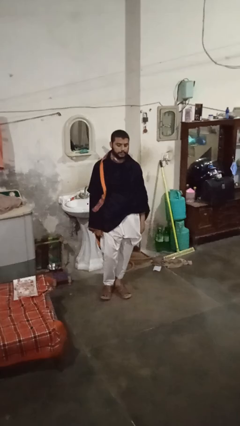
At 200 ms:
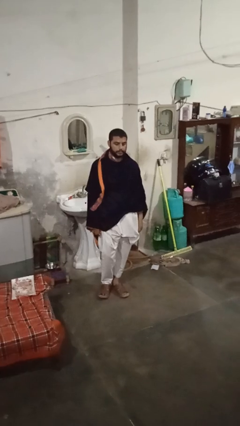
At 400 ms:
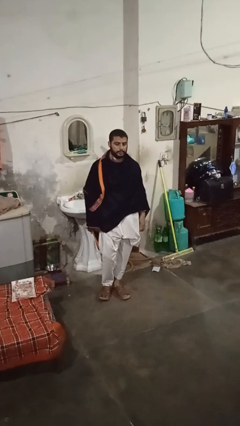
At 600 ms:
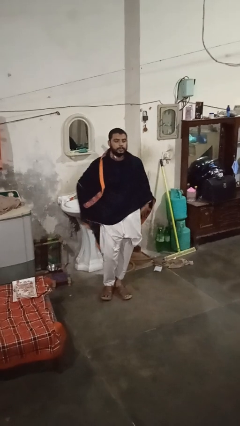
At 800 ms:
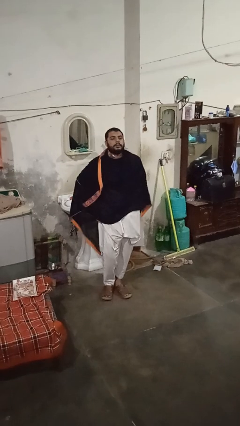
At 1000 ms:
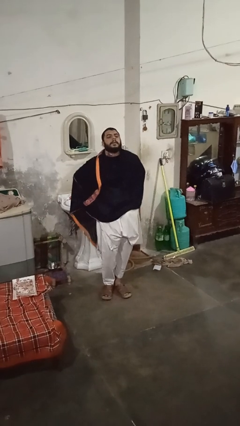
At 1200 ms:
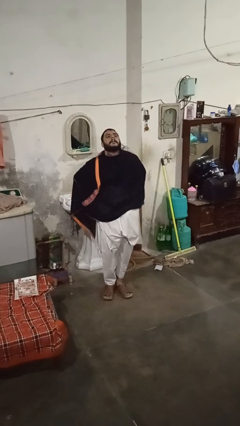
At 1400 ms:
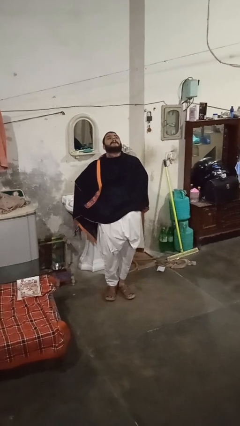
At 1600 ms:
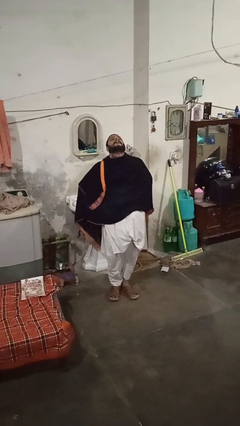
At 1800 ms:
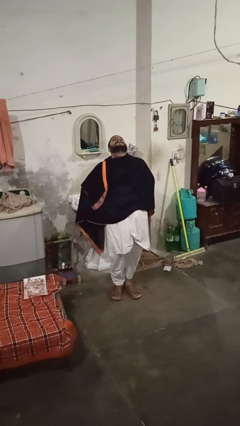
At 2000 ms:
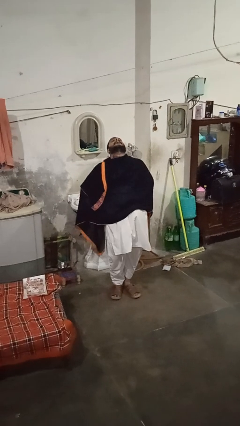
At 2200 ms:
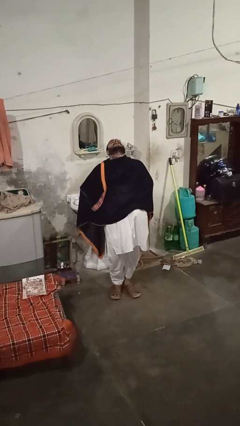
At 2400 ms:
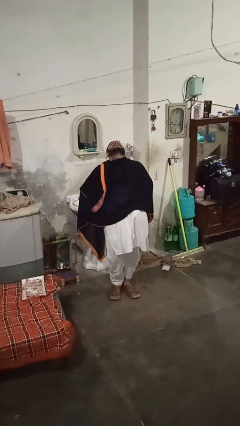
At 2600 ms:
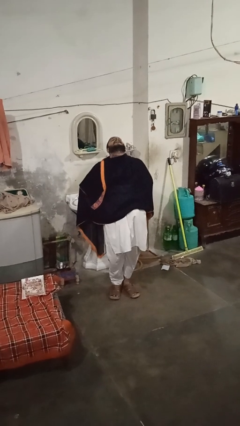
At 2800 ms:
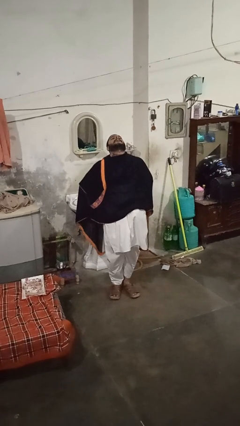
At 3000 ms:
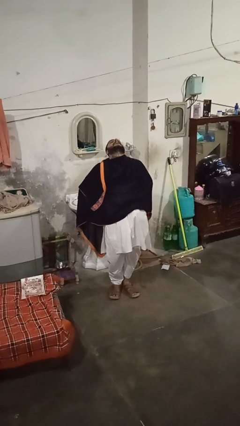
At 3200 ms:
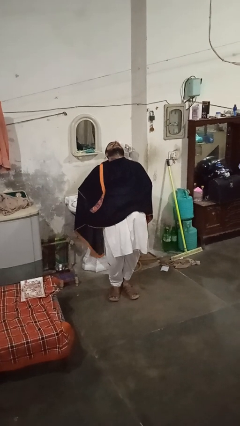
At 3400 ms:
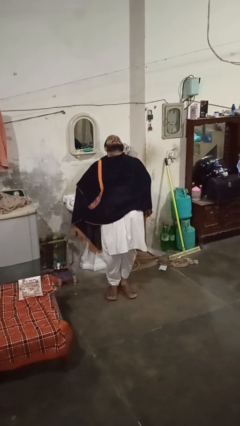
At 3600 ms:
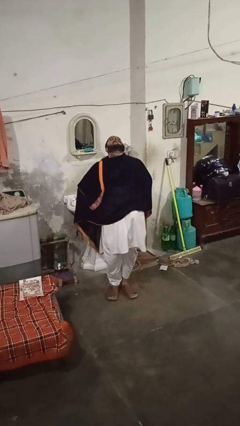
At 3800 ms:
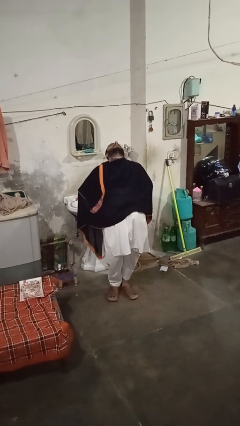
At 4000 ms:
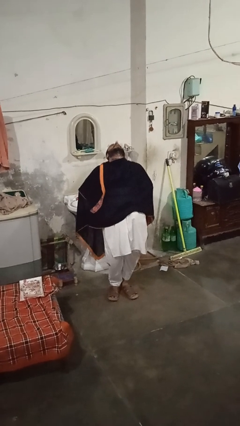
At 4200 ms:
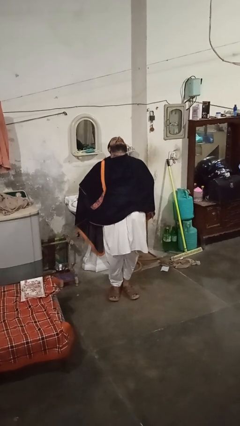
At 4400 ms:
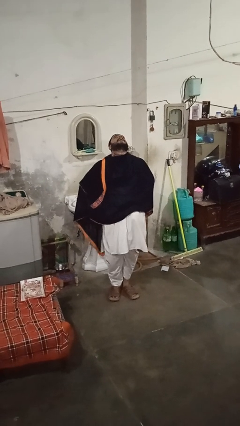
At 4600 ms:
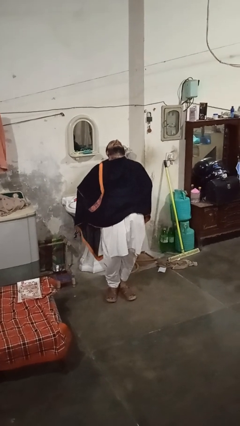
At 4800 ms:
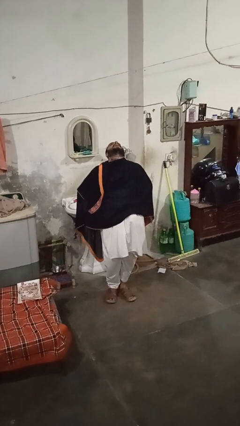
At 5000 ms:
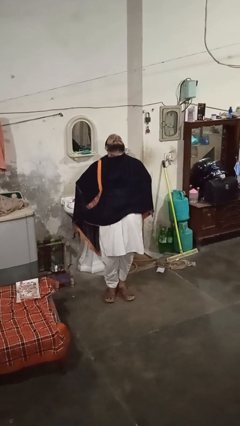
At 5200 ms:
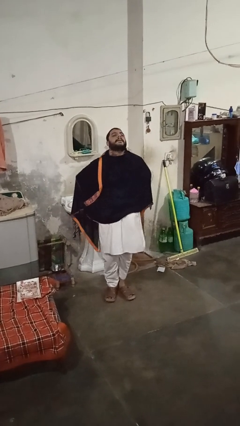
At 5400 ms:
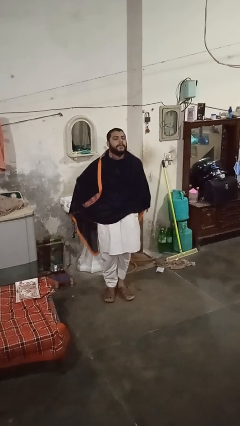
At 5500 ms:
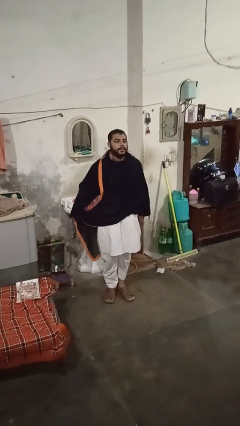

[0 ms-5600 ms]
person stretches back

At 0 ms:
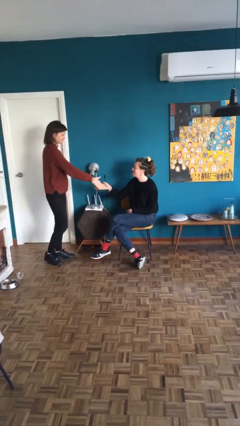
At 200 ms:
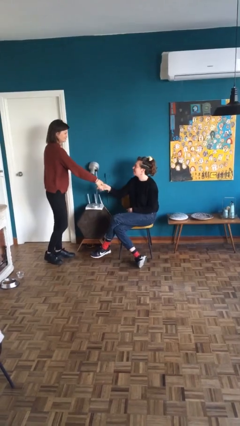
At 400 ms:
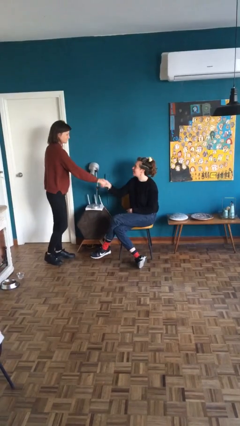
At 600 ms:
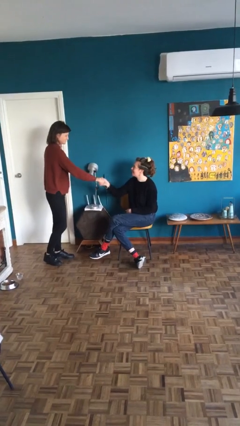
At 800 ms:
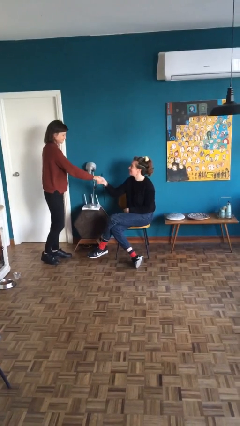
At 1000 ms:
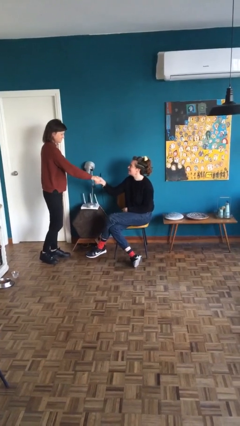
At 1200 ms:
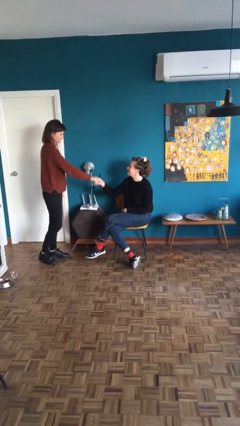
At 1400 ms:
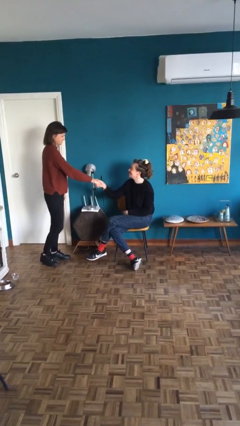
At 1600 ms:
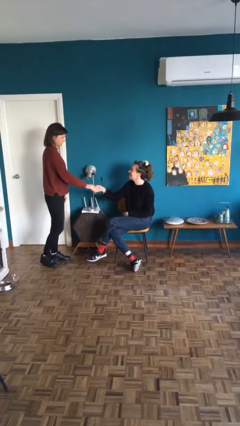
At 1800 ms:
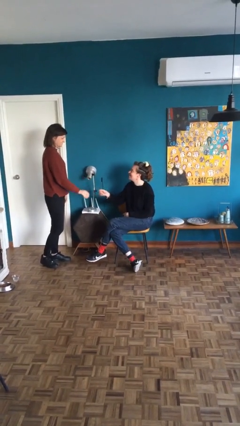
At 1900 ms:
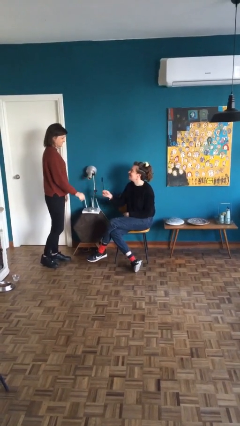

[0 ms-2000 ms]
person shakes hand

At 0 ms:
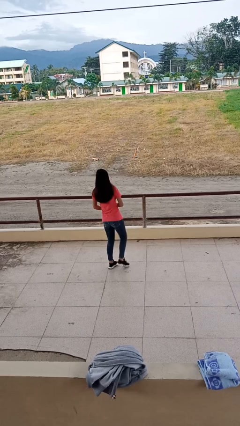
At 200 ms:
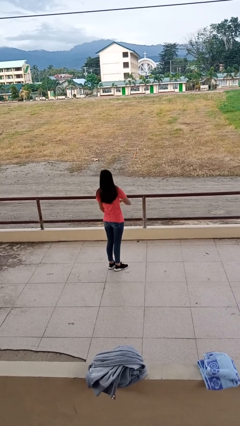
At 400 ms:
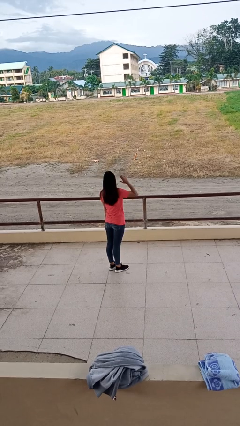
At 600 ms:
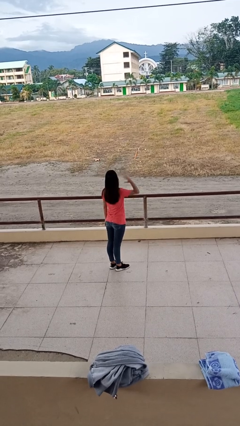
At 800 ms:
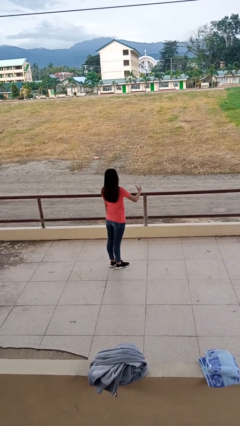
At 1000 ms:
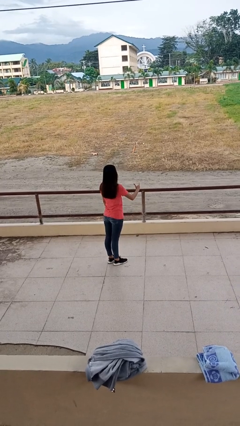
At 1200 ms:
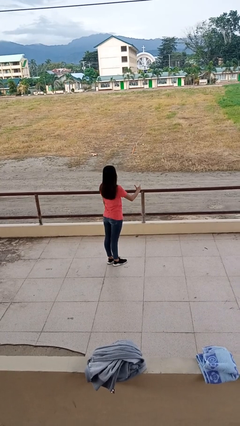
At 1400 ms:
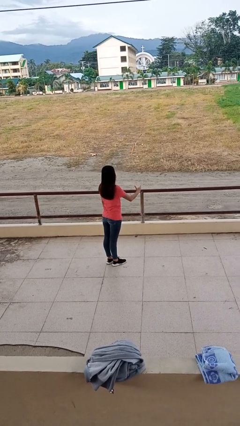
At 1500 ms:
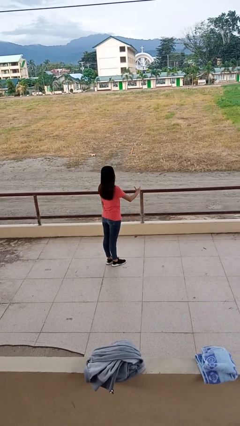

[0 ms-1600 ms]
person karate chop

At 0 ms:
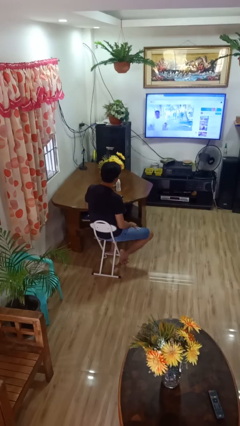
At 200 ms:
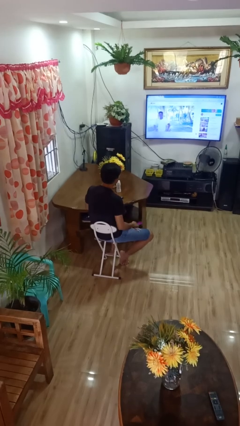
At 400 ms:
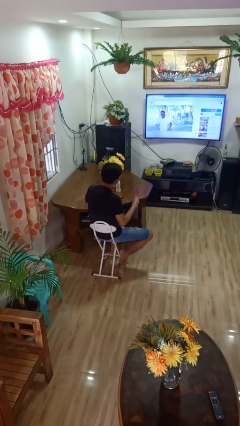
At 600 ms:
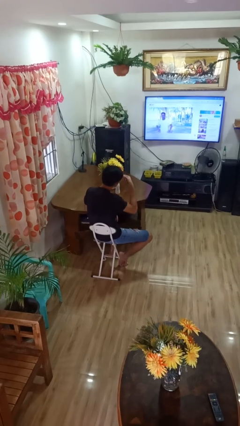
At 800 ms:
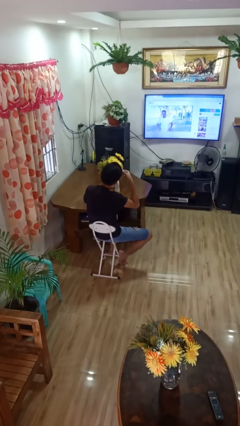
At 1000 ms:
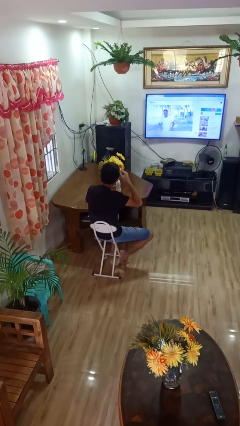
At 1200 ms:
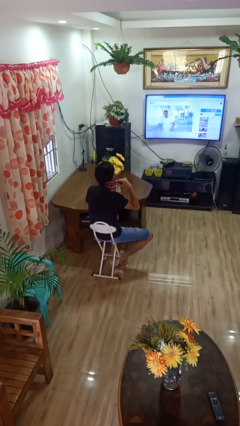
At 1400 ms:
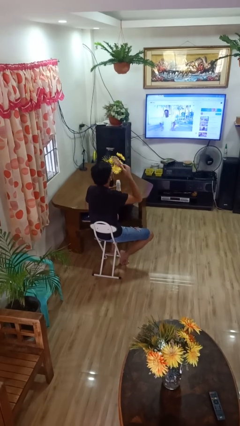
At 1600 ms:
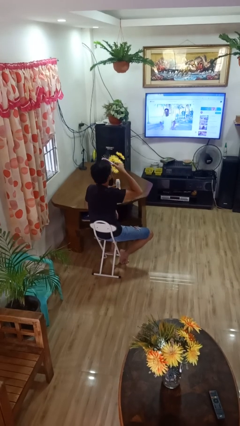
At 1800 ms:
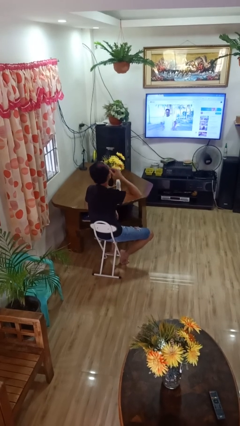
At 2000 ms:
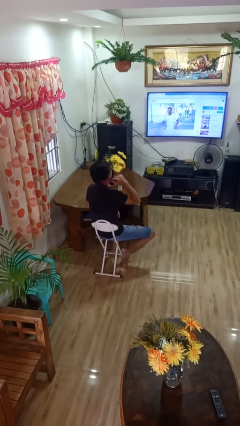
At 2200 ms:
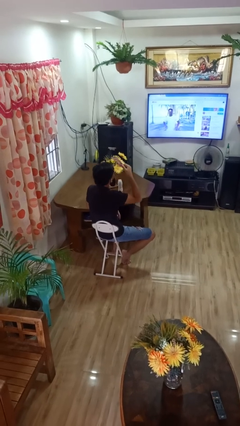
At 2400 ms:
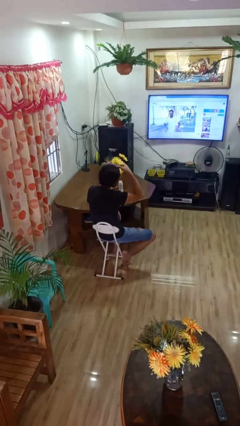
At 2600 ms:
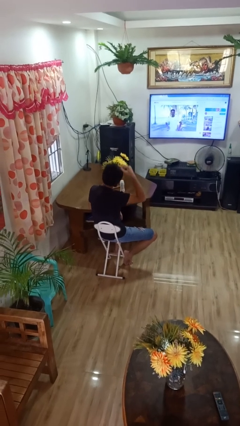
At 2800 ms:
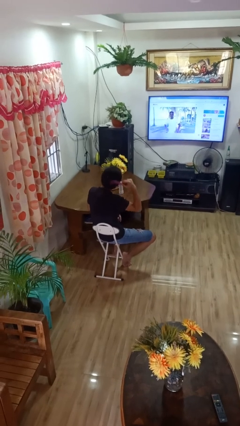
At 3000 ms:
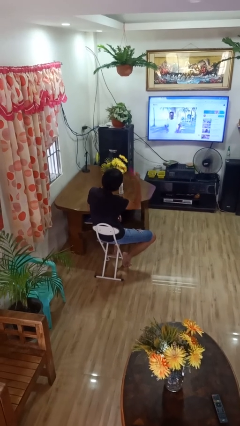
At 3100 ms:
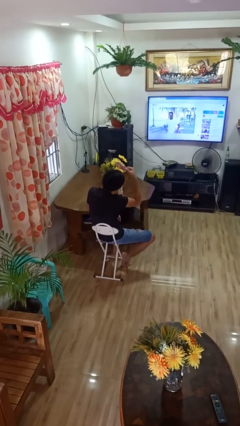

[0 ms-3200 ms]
person brushes hair

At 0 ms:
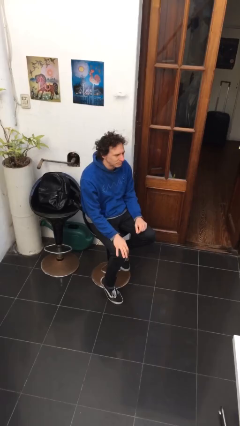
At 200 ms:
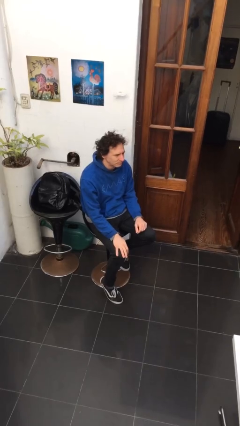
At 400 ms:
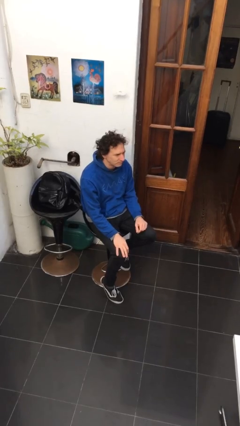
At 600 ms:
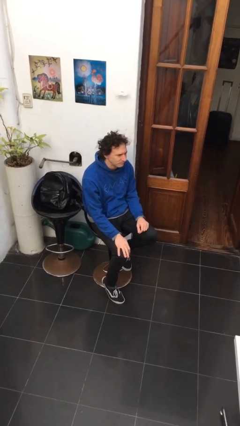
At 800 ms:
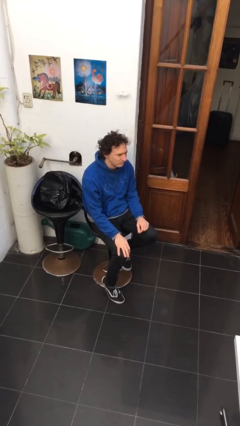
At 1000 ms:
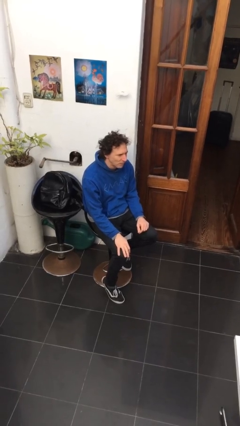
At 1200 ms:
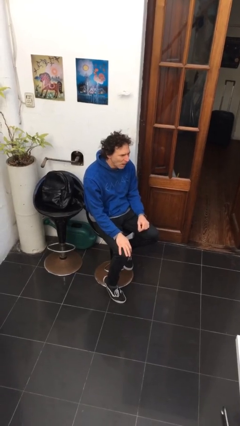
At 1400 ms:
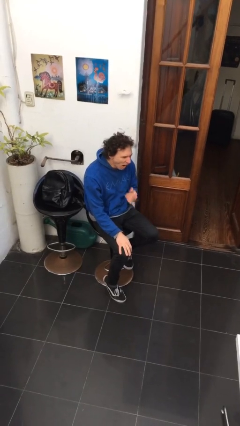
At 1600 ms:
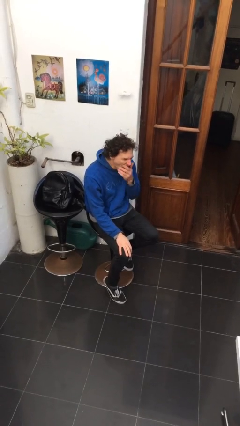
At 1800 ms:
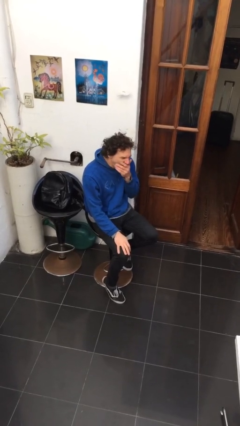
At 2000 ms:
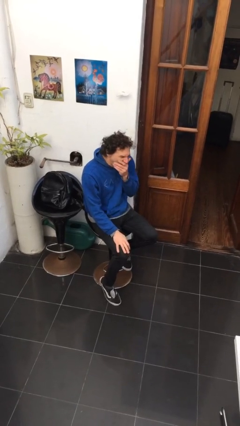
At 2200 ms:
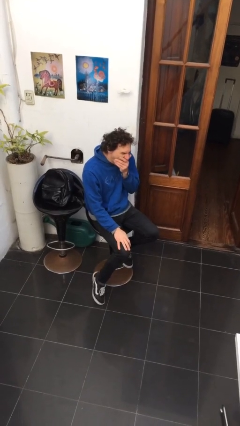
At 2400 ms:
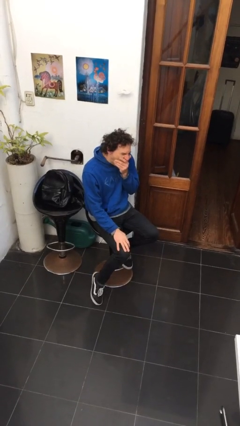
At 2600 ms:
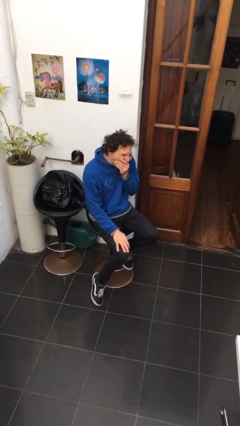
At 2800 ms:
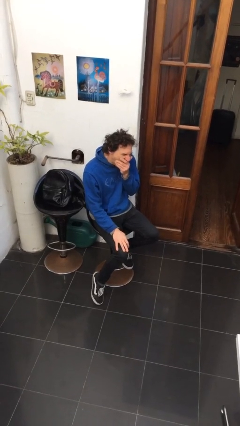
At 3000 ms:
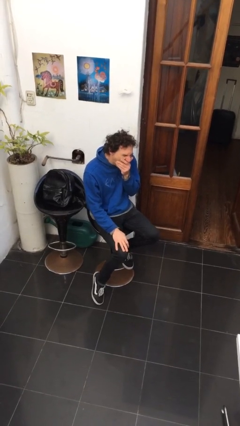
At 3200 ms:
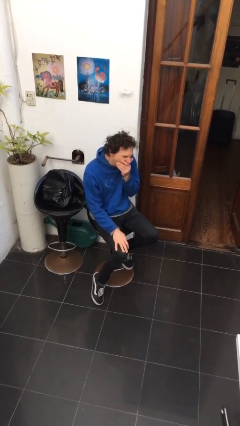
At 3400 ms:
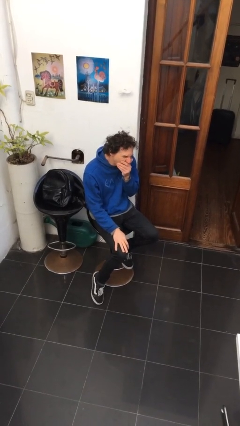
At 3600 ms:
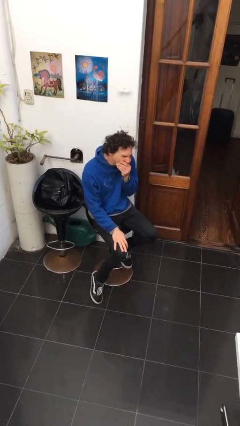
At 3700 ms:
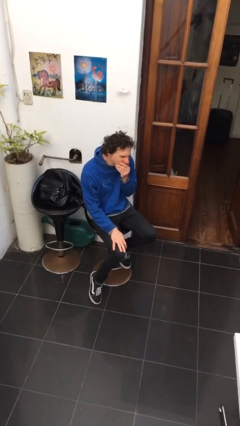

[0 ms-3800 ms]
person yawns

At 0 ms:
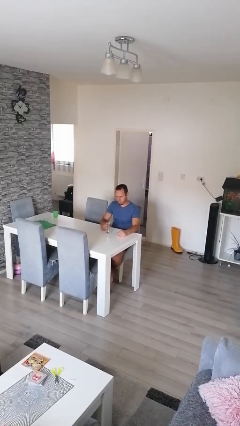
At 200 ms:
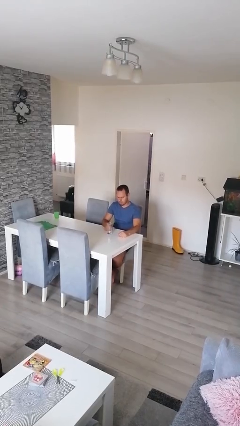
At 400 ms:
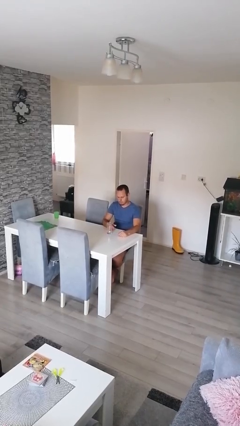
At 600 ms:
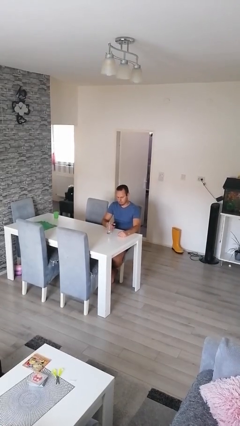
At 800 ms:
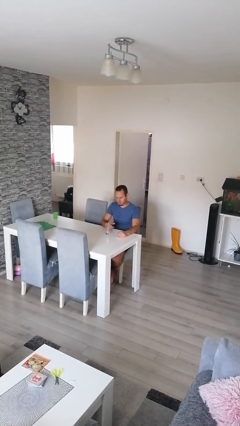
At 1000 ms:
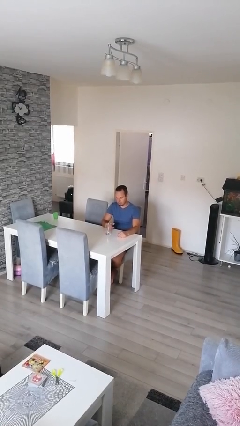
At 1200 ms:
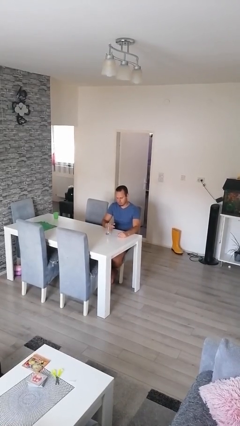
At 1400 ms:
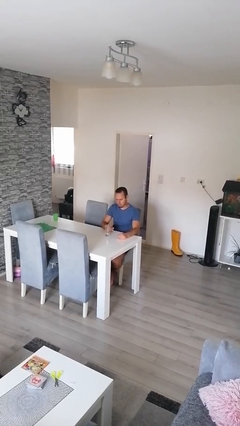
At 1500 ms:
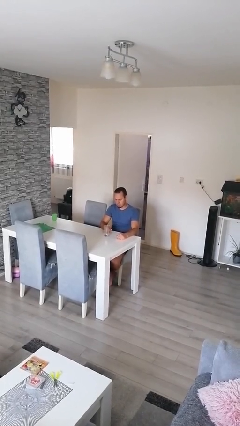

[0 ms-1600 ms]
person knocks over glass
